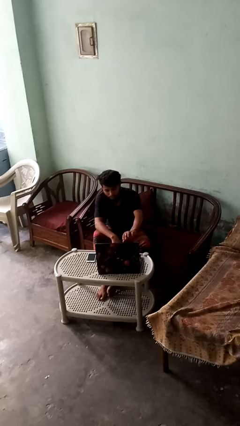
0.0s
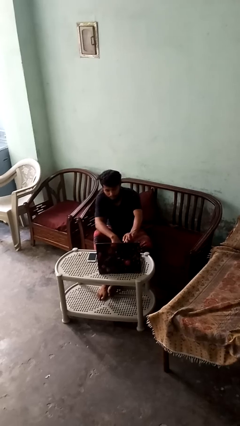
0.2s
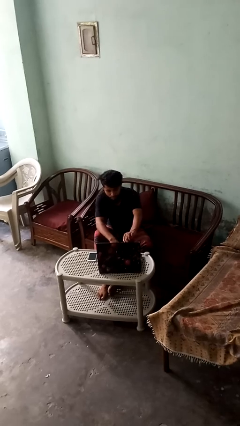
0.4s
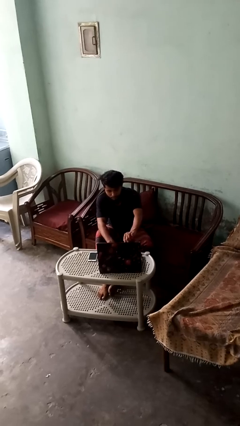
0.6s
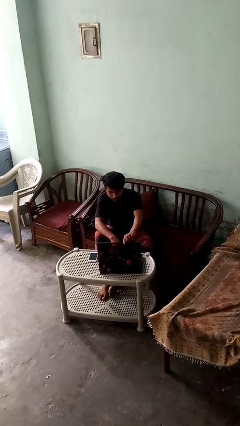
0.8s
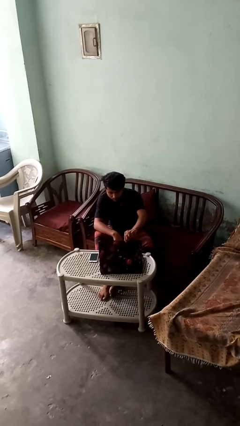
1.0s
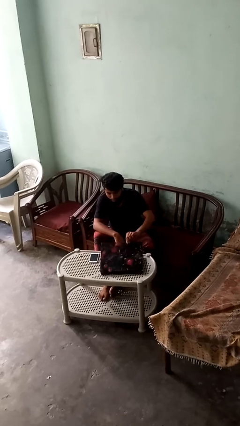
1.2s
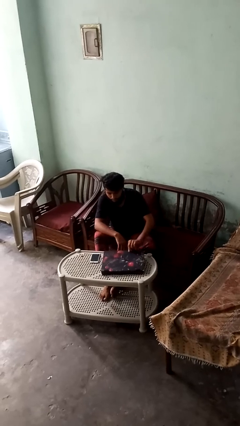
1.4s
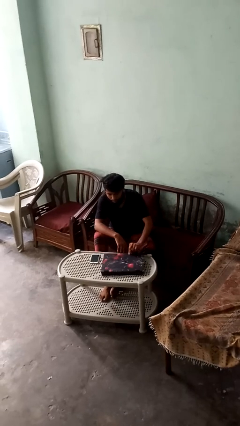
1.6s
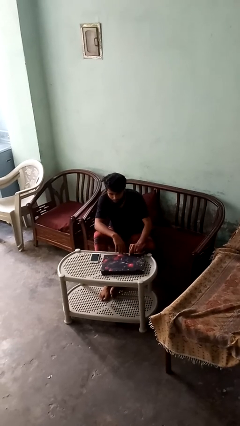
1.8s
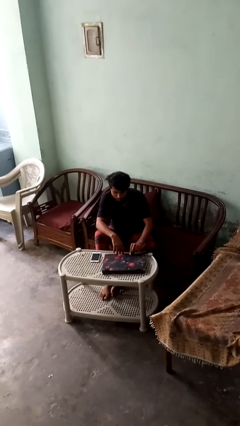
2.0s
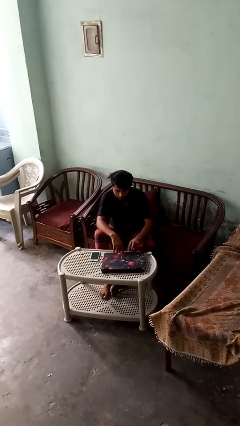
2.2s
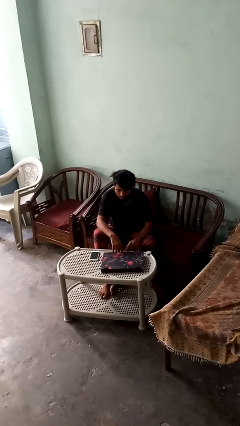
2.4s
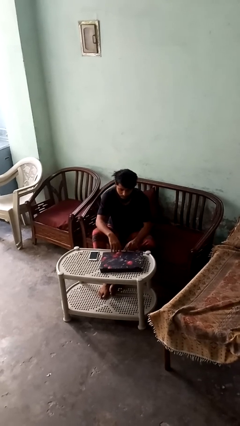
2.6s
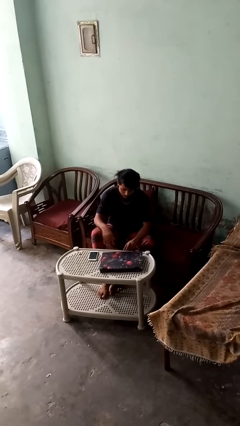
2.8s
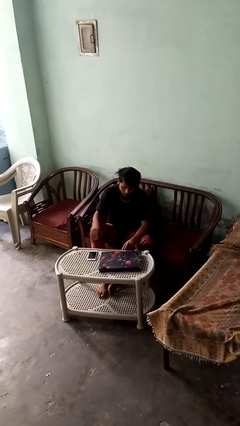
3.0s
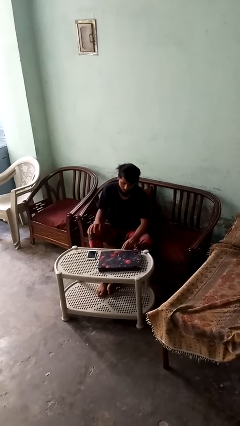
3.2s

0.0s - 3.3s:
person closes laptop

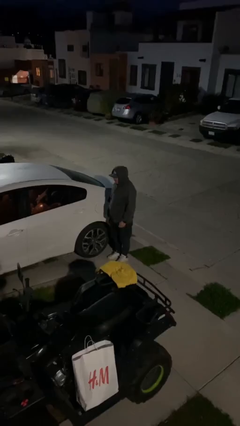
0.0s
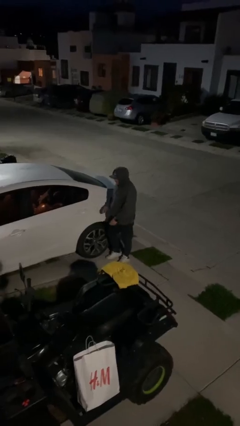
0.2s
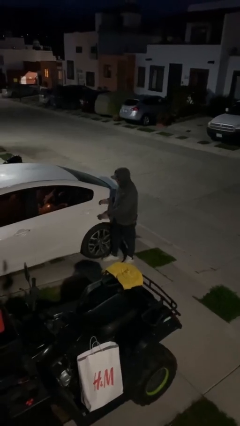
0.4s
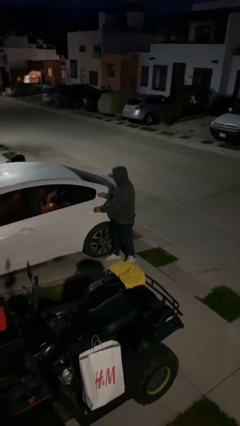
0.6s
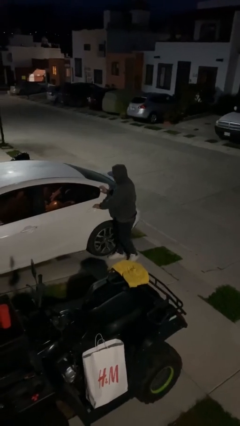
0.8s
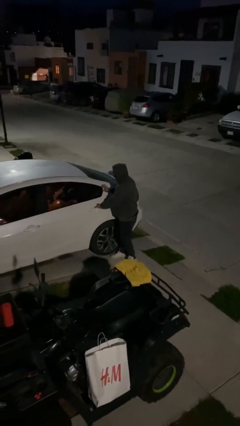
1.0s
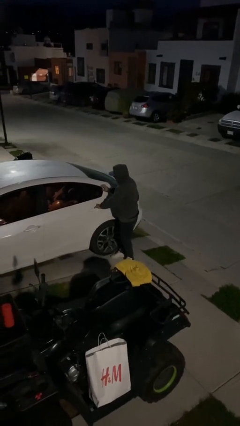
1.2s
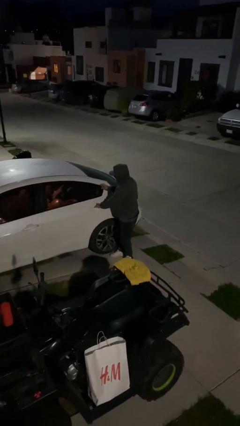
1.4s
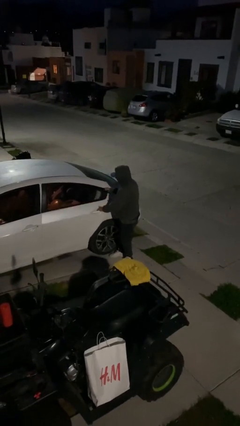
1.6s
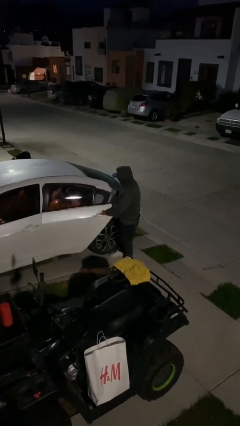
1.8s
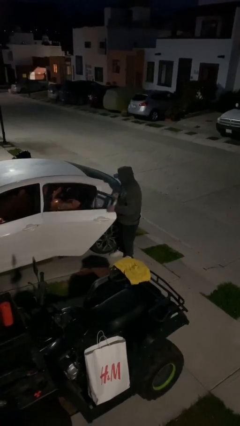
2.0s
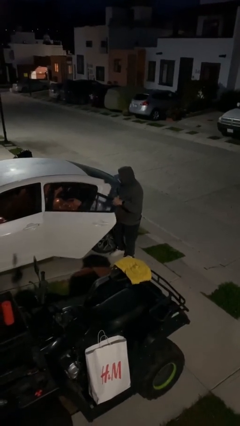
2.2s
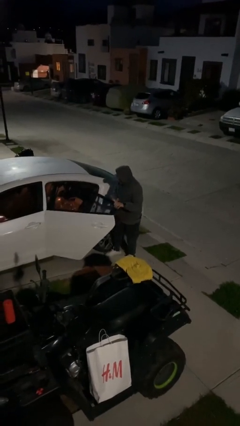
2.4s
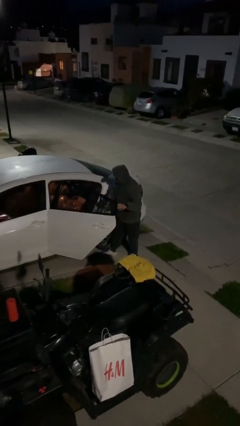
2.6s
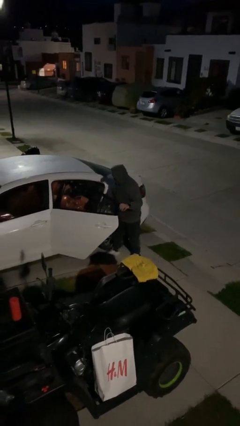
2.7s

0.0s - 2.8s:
person opens car door

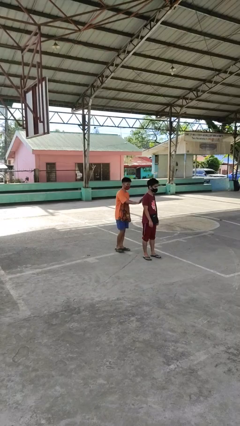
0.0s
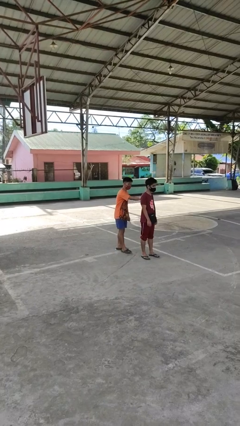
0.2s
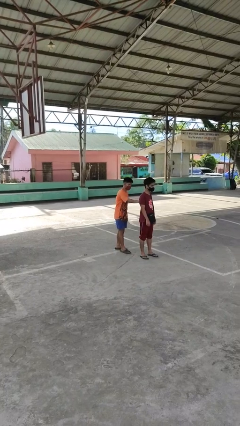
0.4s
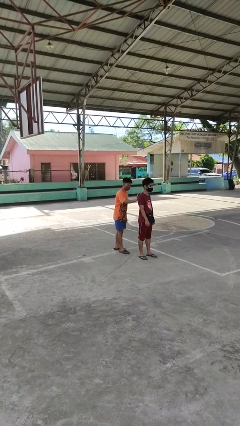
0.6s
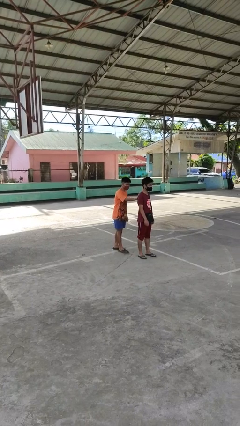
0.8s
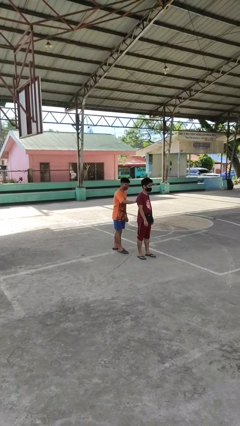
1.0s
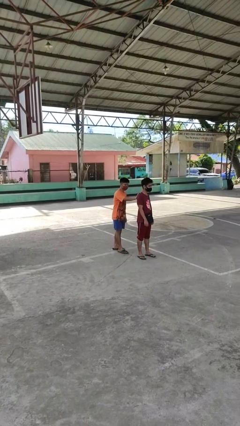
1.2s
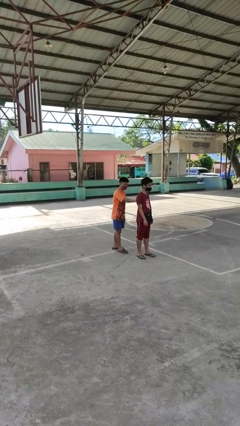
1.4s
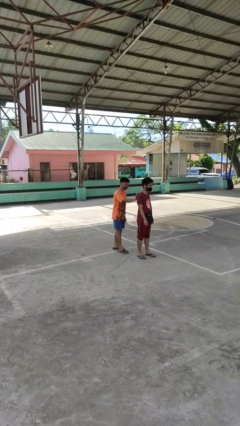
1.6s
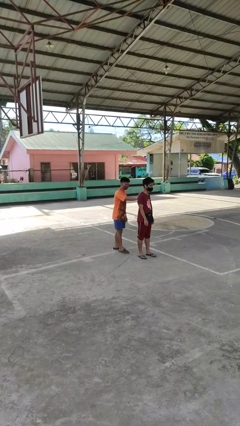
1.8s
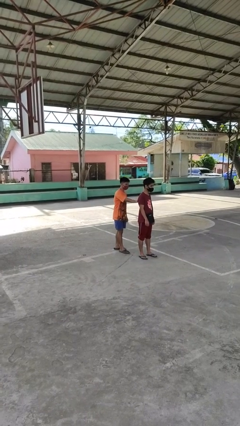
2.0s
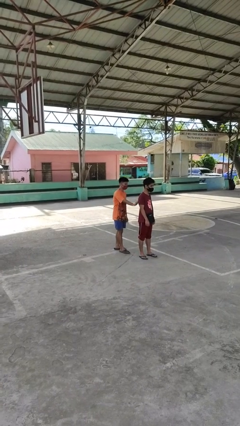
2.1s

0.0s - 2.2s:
person touches back of person

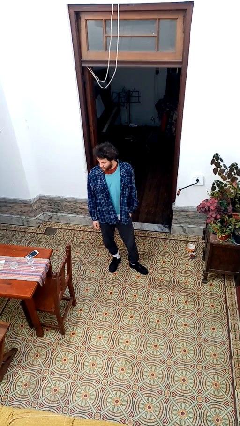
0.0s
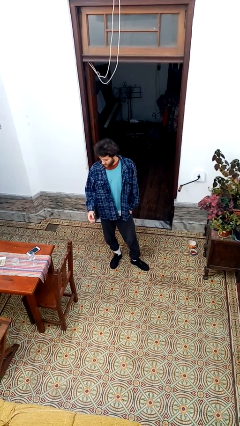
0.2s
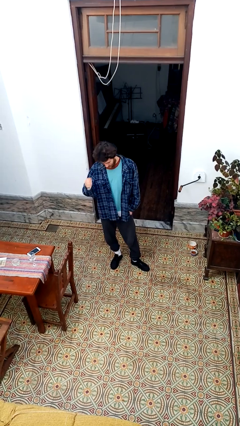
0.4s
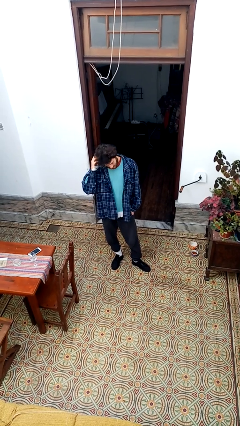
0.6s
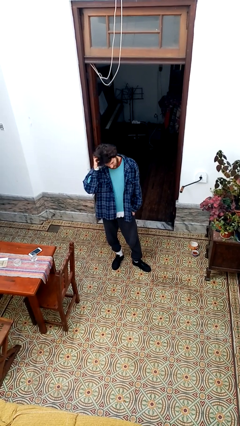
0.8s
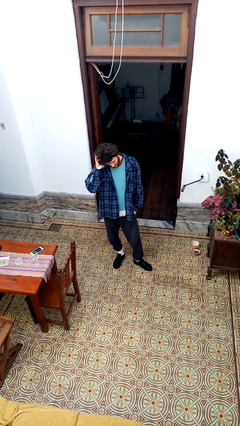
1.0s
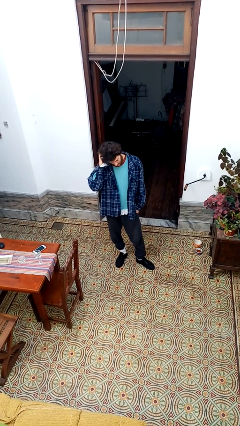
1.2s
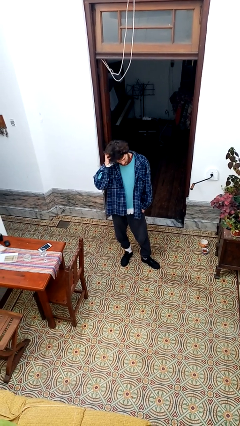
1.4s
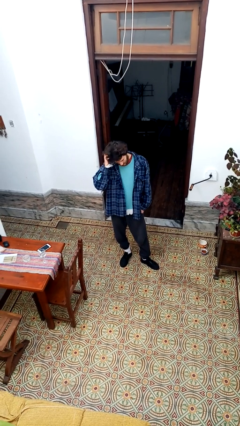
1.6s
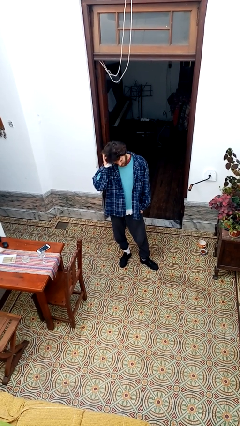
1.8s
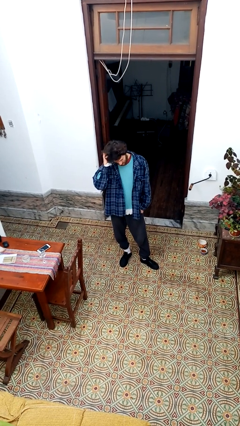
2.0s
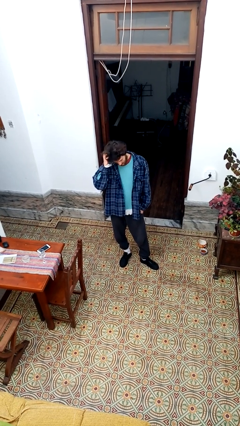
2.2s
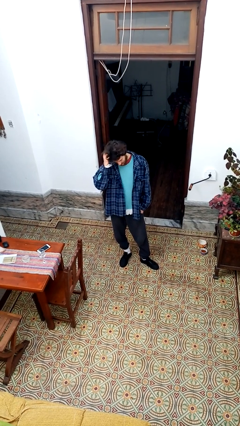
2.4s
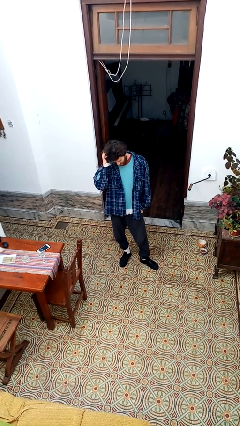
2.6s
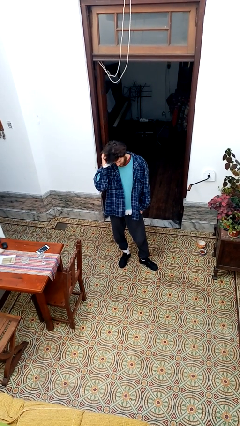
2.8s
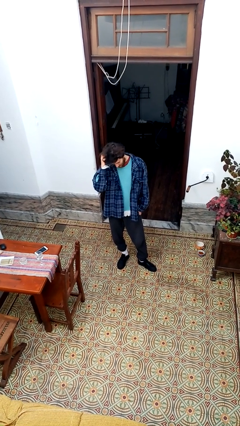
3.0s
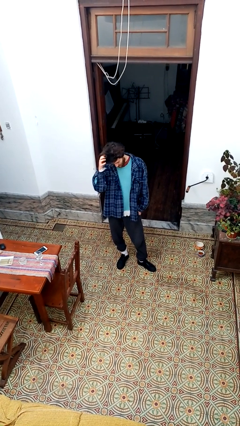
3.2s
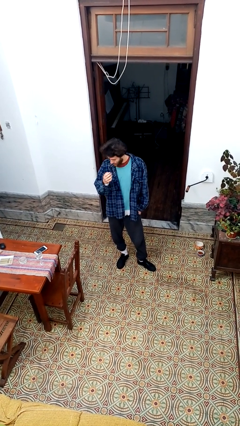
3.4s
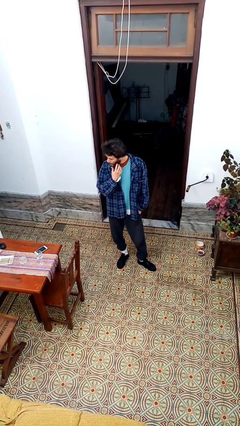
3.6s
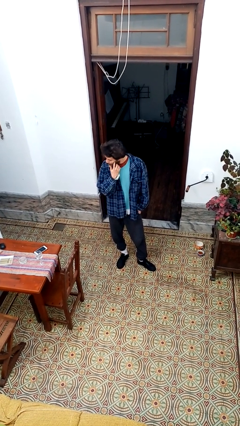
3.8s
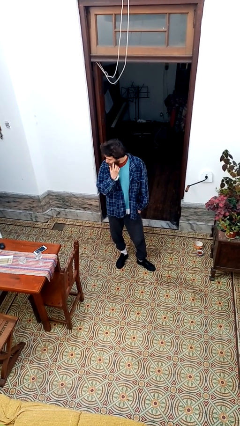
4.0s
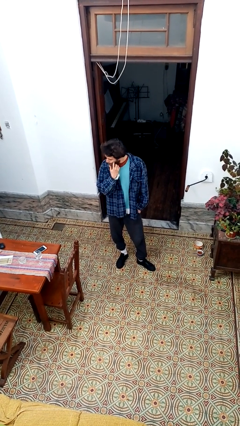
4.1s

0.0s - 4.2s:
person scratches face

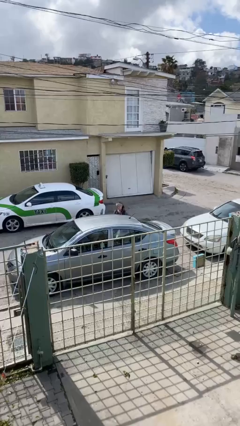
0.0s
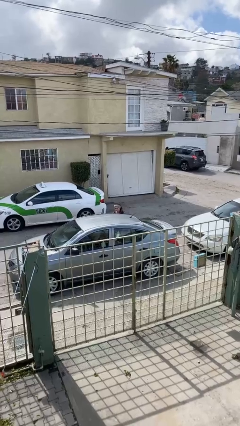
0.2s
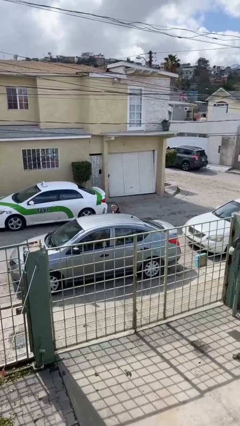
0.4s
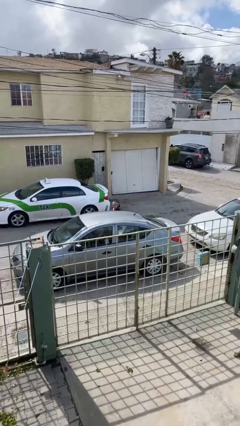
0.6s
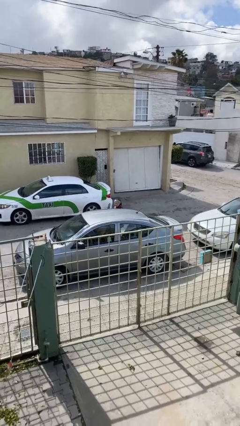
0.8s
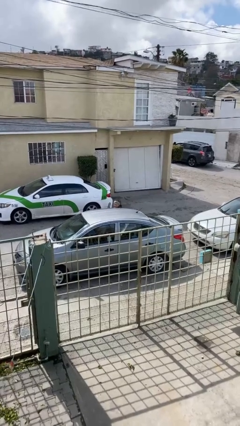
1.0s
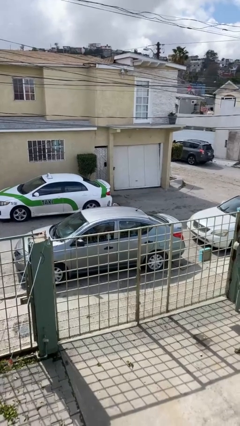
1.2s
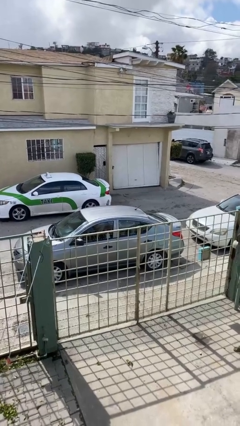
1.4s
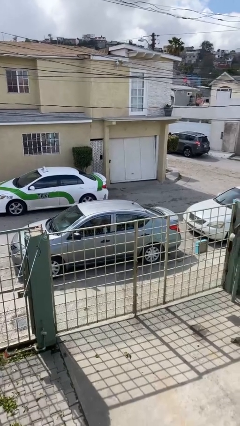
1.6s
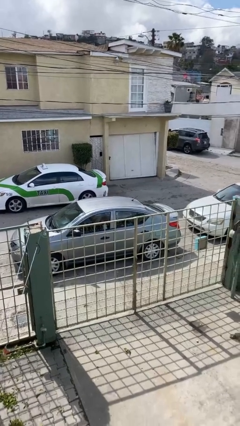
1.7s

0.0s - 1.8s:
person enters car

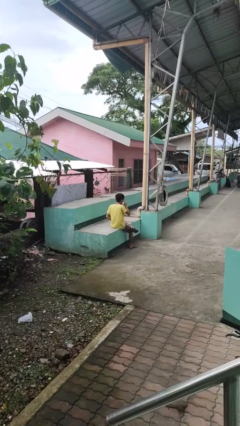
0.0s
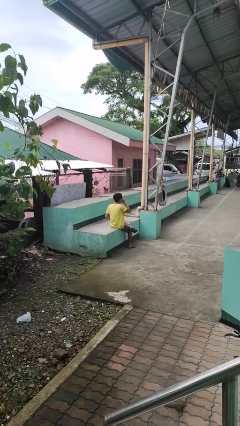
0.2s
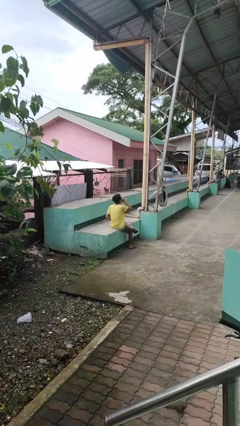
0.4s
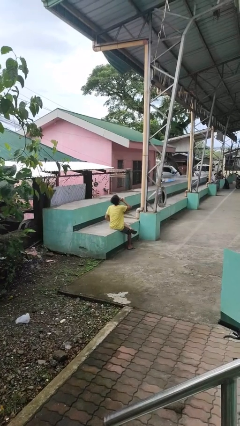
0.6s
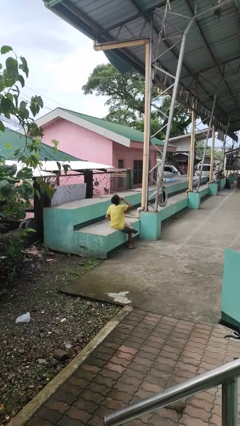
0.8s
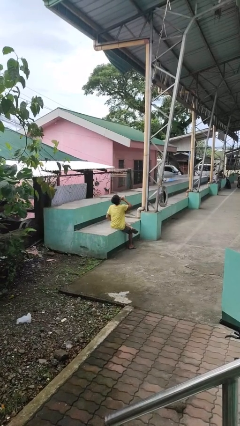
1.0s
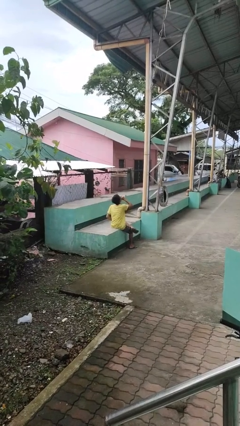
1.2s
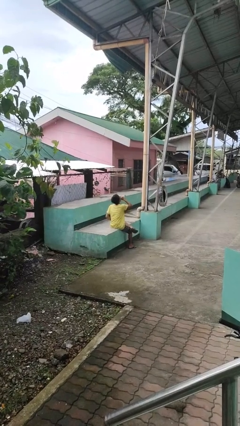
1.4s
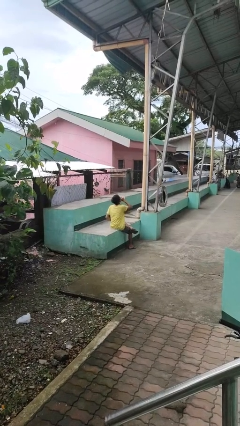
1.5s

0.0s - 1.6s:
person drinks from bottle

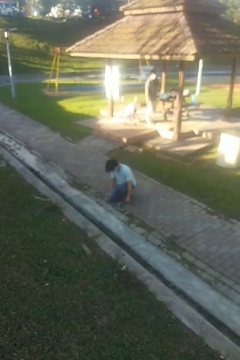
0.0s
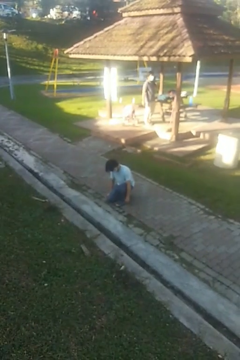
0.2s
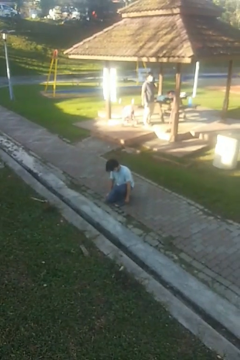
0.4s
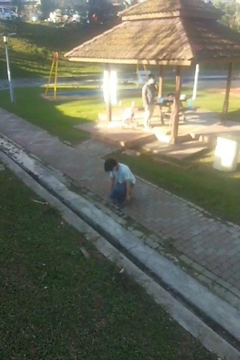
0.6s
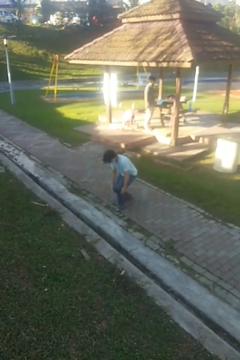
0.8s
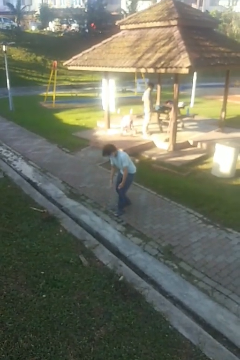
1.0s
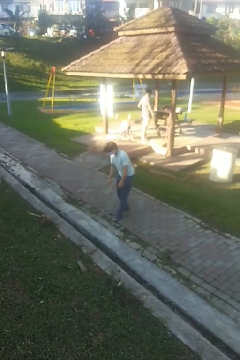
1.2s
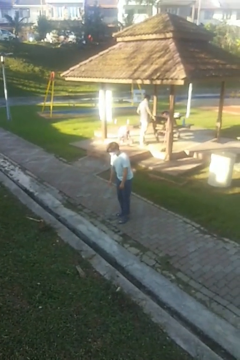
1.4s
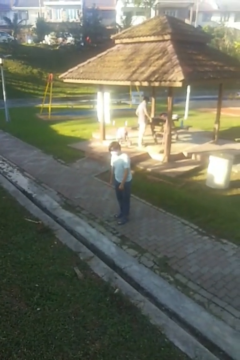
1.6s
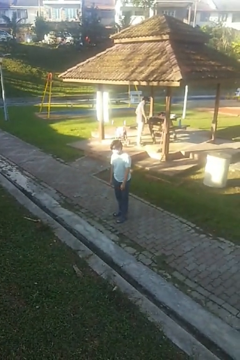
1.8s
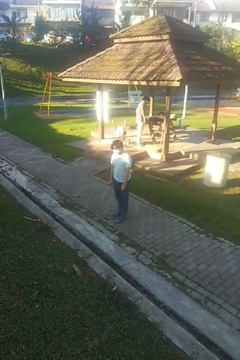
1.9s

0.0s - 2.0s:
person stands up from floor
